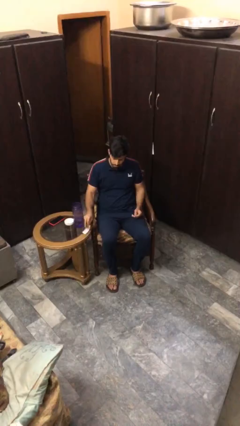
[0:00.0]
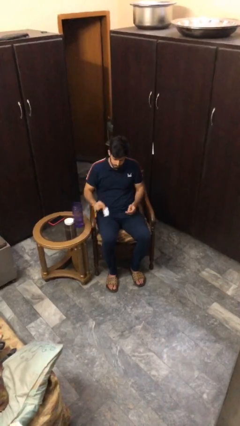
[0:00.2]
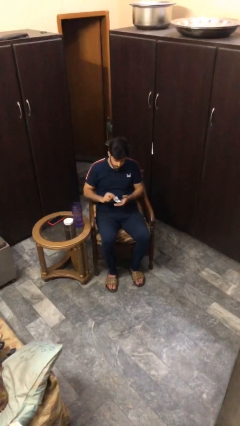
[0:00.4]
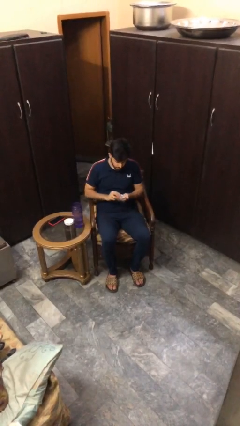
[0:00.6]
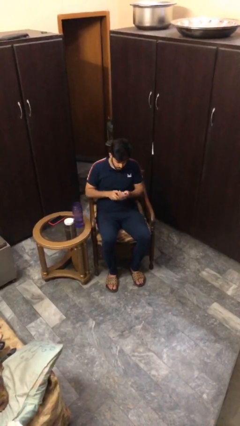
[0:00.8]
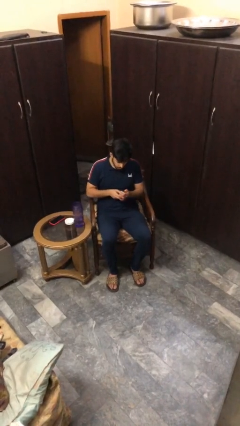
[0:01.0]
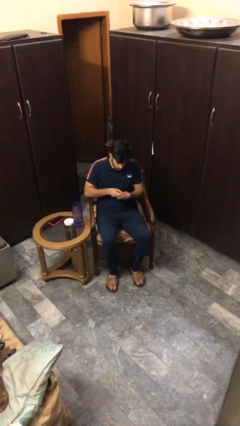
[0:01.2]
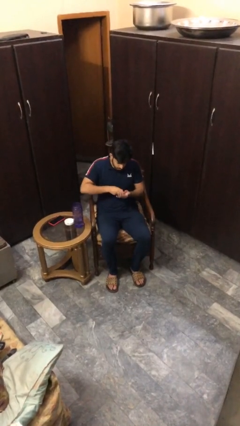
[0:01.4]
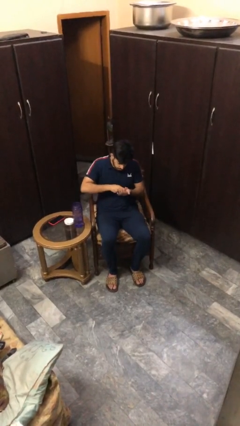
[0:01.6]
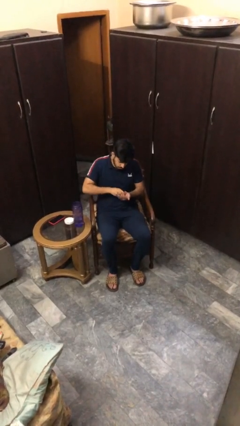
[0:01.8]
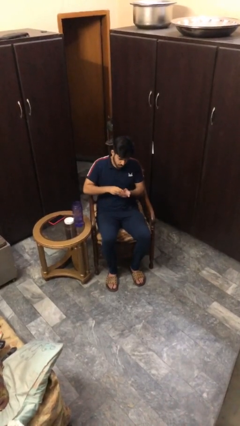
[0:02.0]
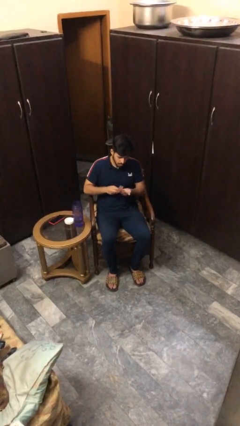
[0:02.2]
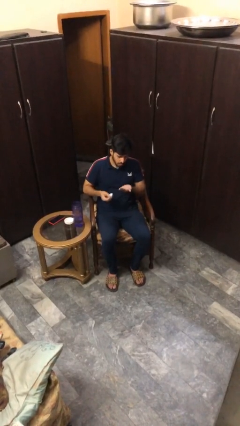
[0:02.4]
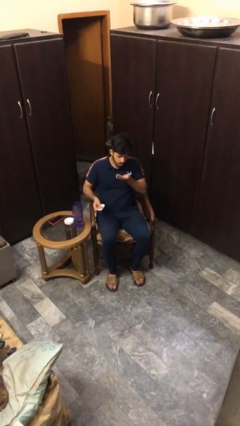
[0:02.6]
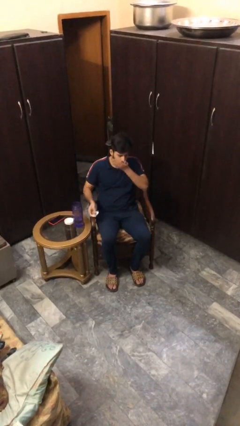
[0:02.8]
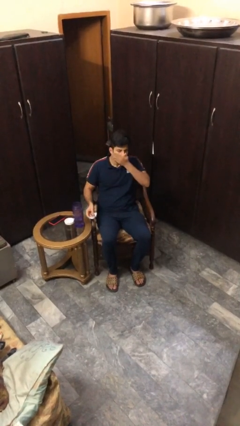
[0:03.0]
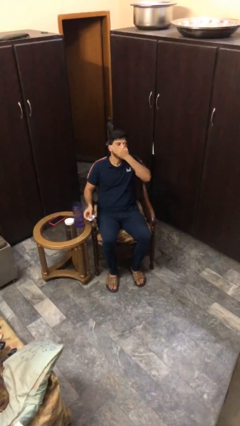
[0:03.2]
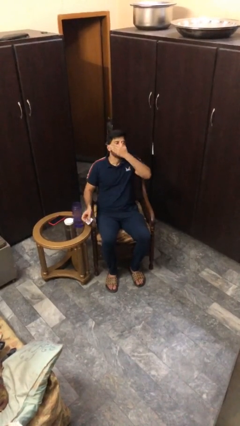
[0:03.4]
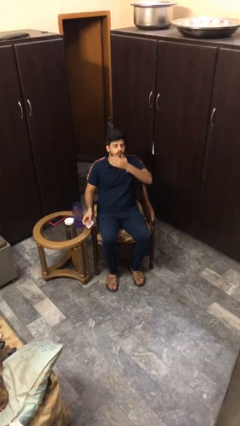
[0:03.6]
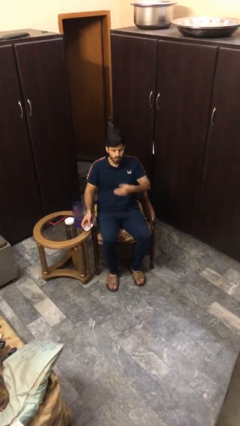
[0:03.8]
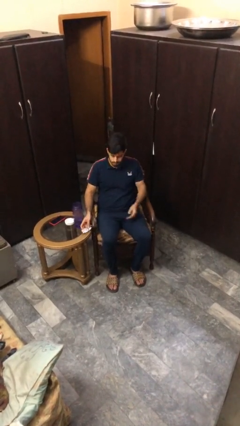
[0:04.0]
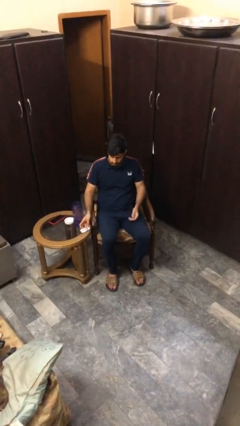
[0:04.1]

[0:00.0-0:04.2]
person takes medicine pills

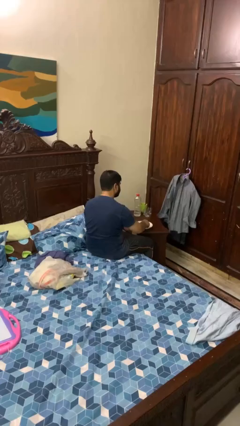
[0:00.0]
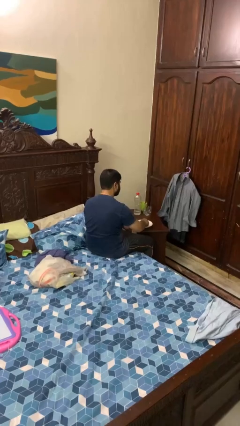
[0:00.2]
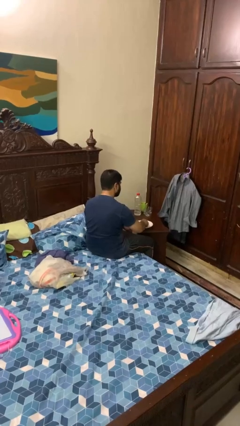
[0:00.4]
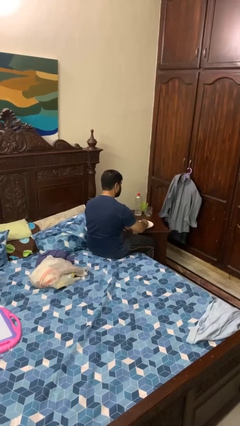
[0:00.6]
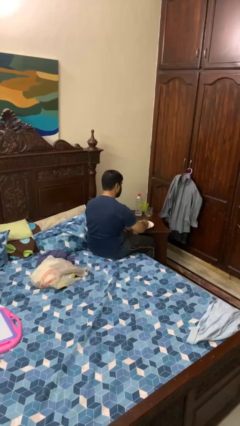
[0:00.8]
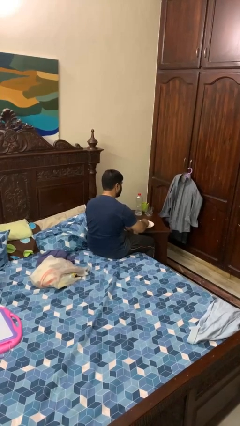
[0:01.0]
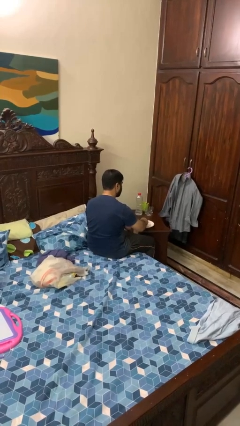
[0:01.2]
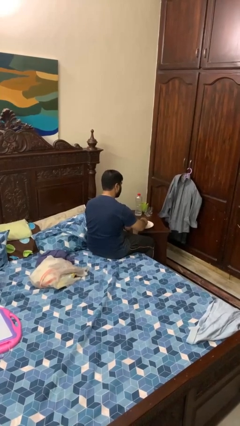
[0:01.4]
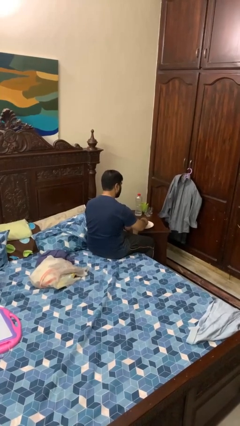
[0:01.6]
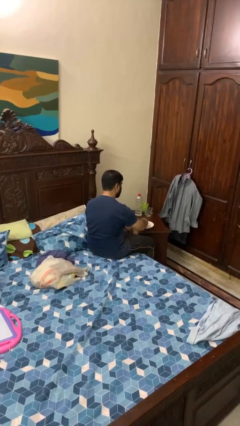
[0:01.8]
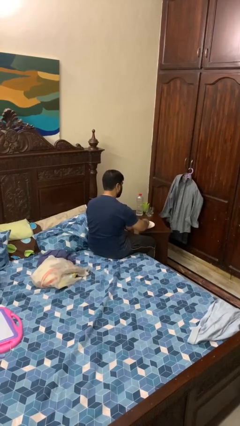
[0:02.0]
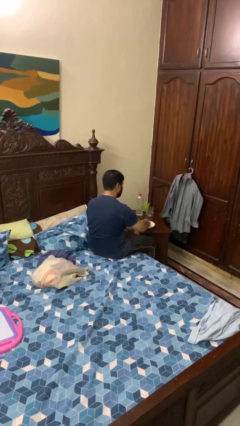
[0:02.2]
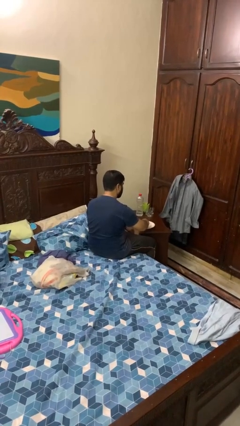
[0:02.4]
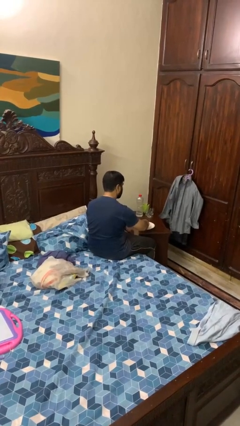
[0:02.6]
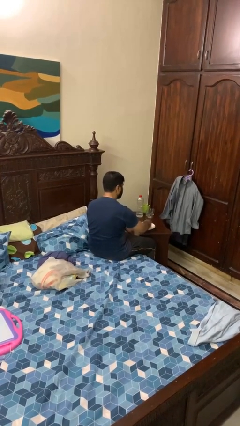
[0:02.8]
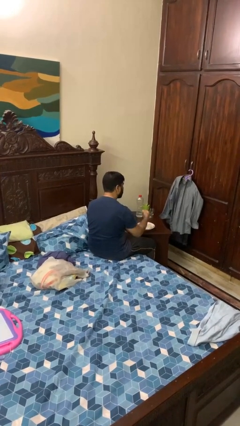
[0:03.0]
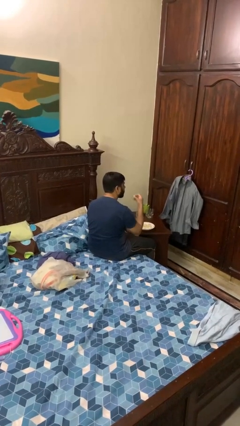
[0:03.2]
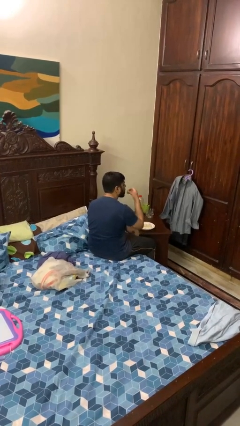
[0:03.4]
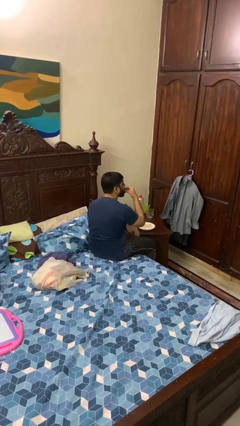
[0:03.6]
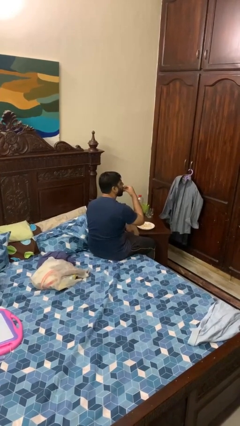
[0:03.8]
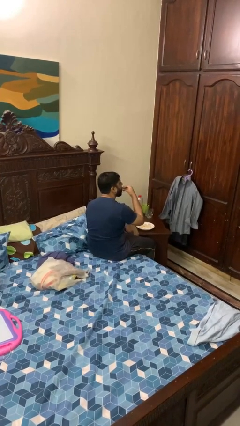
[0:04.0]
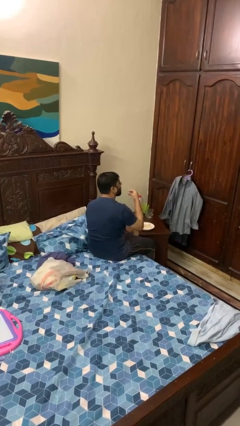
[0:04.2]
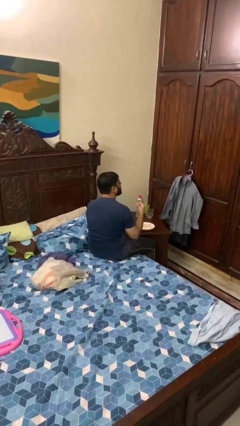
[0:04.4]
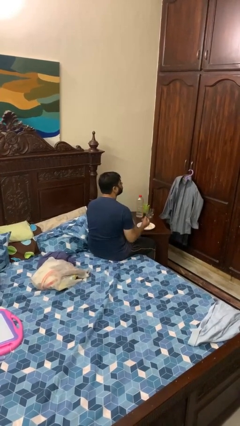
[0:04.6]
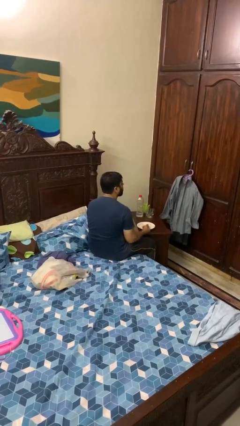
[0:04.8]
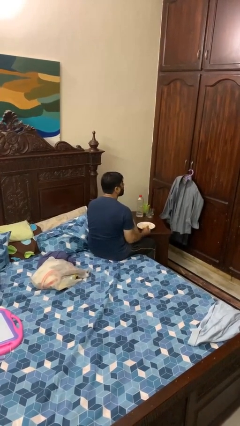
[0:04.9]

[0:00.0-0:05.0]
person eats with hands

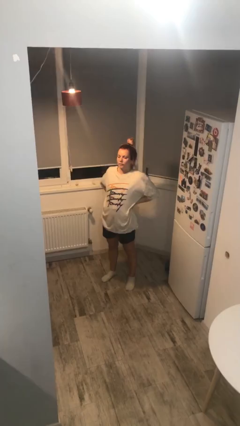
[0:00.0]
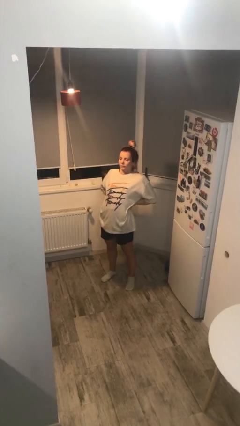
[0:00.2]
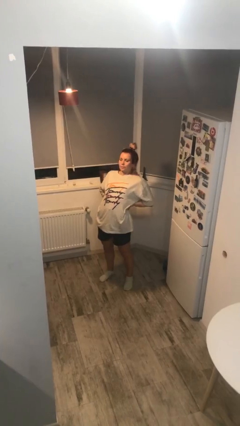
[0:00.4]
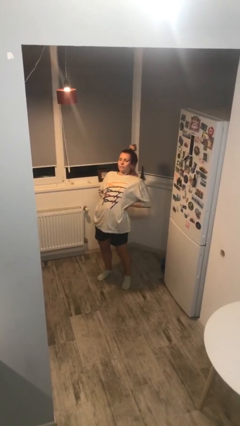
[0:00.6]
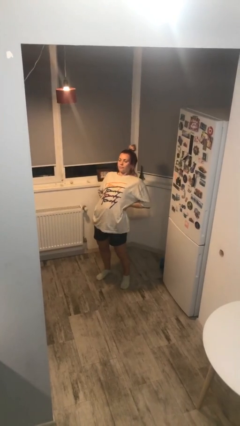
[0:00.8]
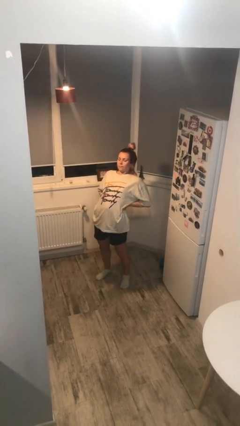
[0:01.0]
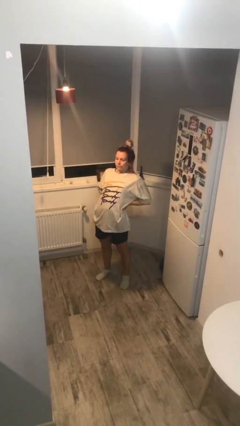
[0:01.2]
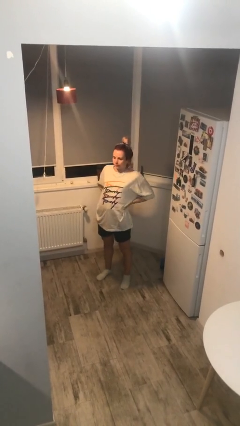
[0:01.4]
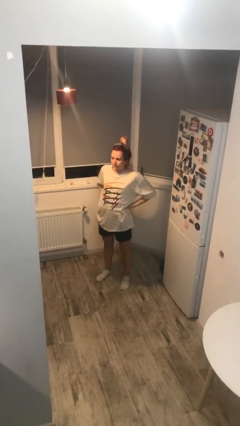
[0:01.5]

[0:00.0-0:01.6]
person stretches back

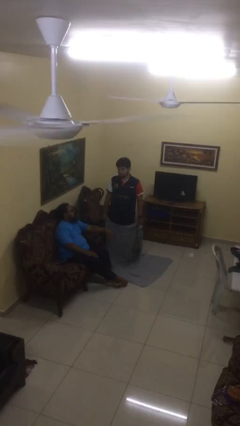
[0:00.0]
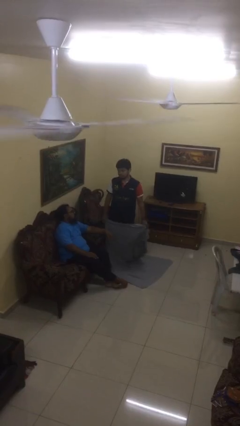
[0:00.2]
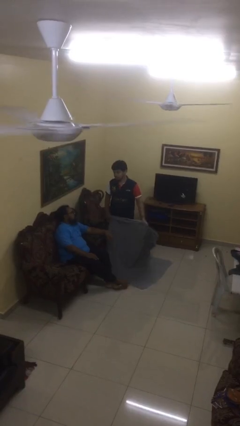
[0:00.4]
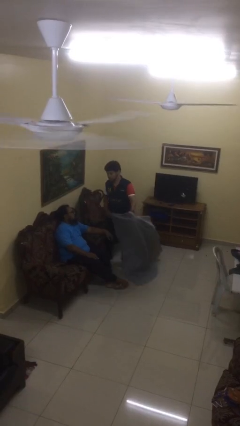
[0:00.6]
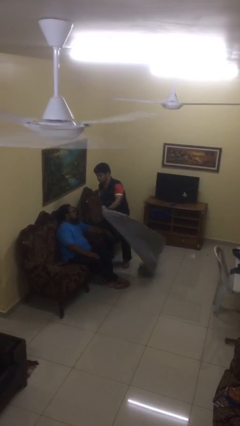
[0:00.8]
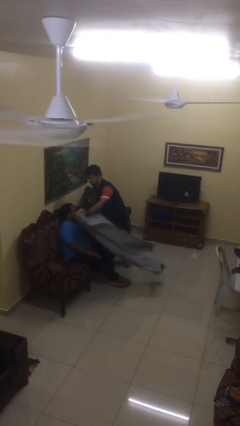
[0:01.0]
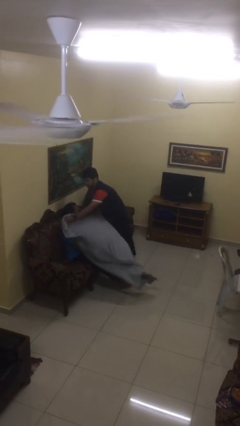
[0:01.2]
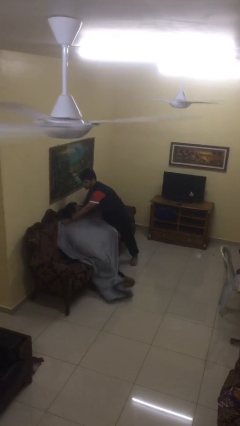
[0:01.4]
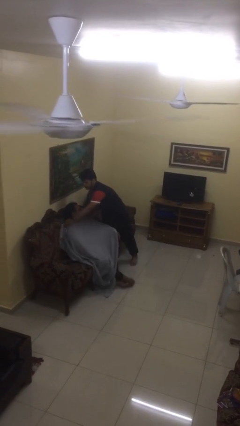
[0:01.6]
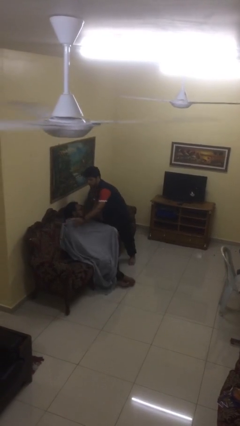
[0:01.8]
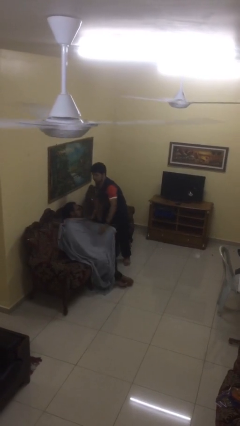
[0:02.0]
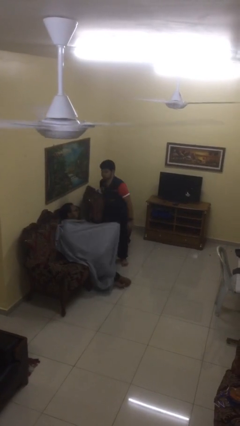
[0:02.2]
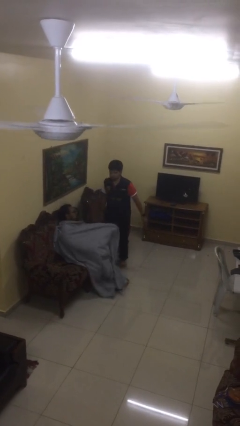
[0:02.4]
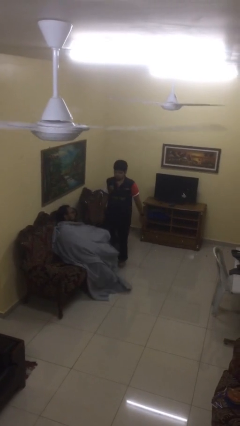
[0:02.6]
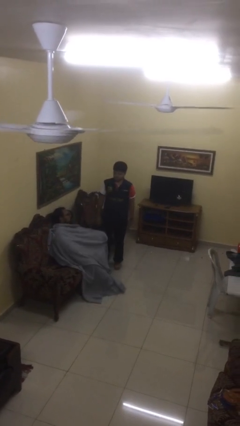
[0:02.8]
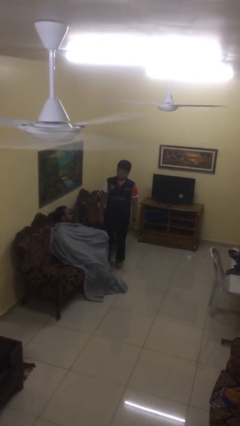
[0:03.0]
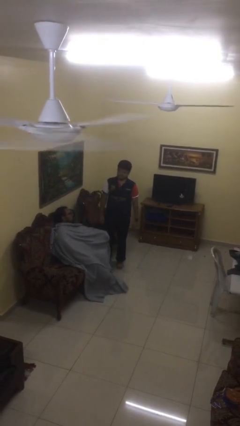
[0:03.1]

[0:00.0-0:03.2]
person covers friend with blanket

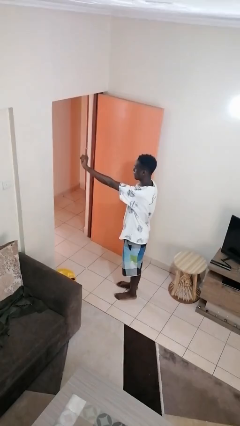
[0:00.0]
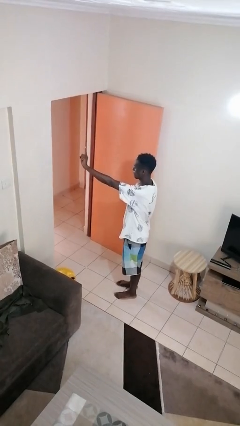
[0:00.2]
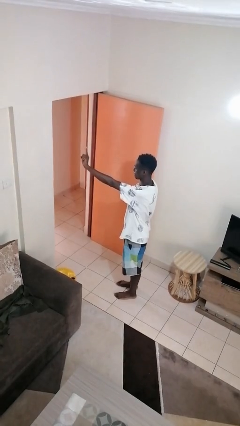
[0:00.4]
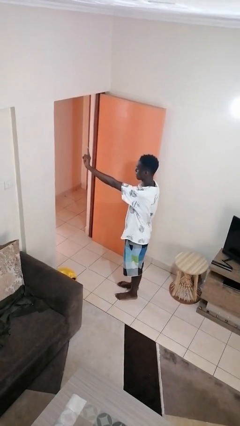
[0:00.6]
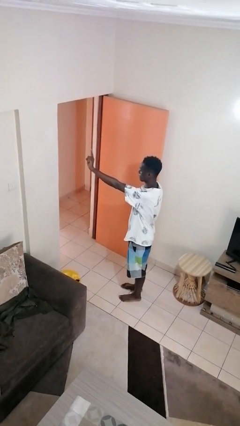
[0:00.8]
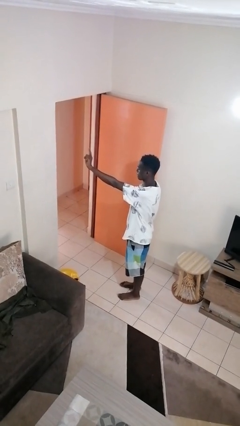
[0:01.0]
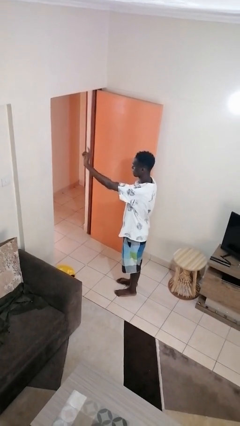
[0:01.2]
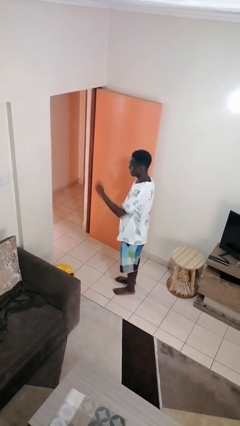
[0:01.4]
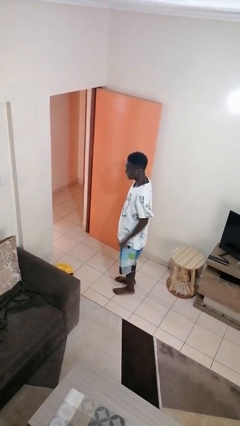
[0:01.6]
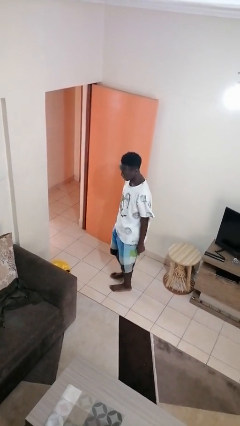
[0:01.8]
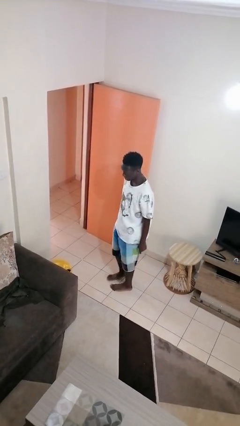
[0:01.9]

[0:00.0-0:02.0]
person gestures number one

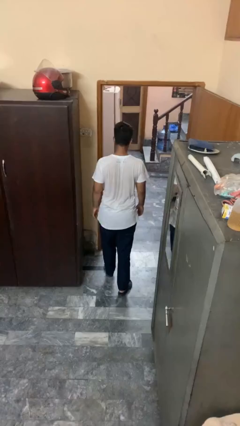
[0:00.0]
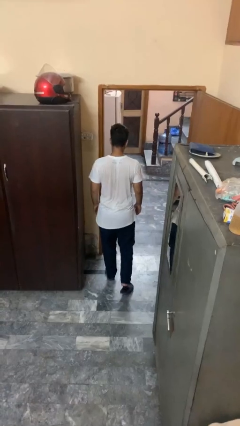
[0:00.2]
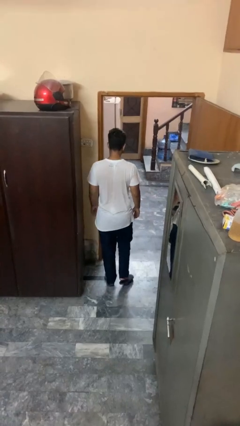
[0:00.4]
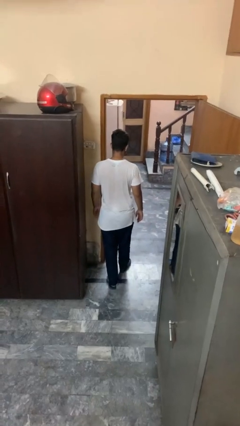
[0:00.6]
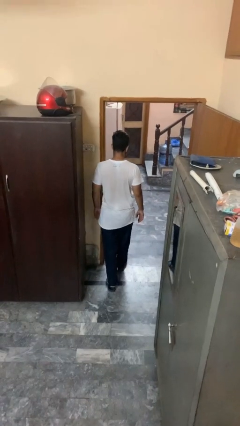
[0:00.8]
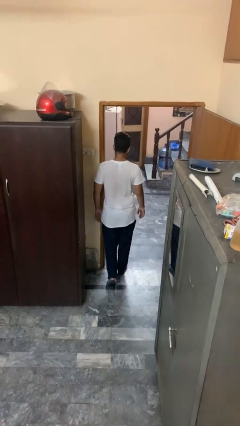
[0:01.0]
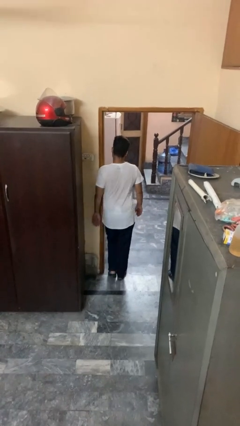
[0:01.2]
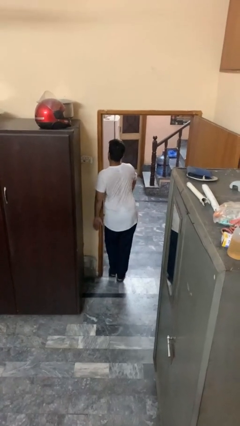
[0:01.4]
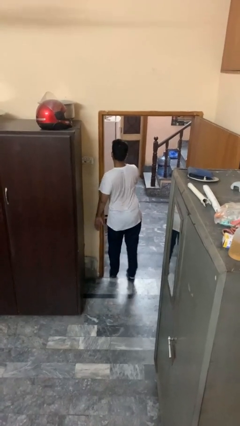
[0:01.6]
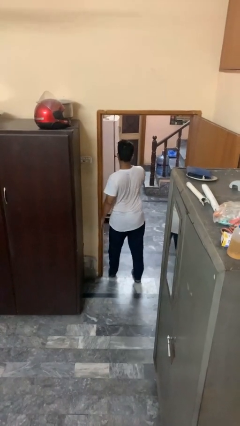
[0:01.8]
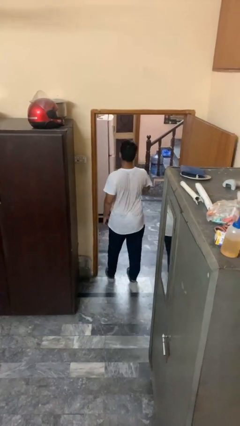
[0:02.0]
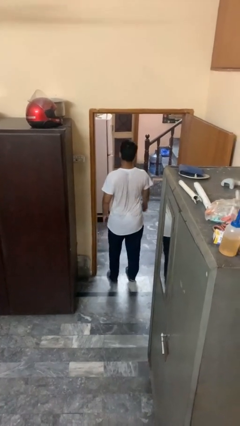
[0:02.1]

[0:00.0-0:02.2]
person bumps into wall
